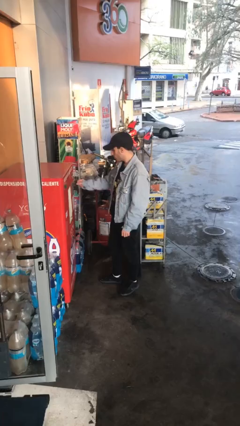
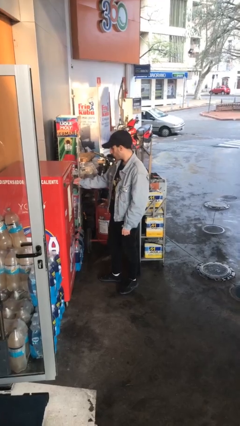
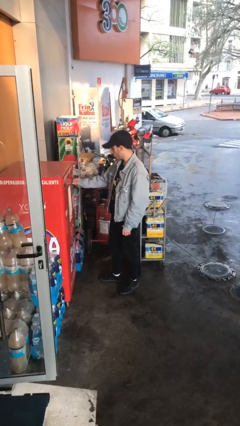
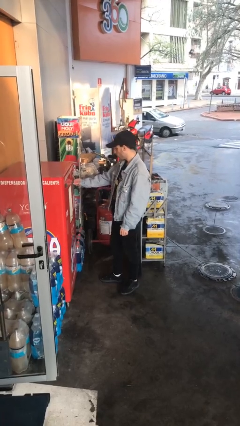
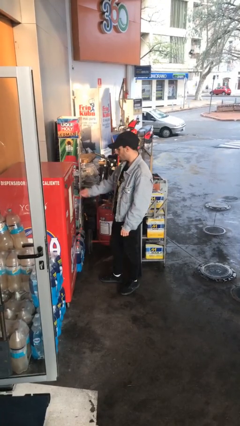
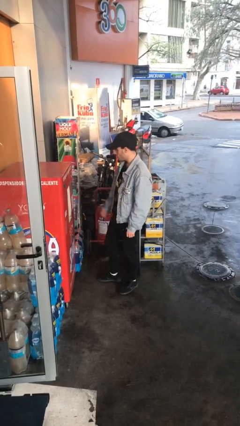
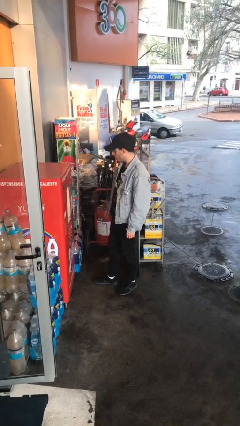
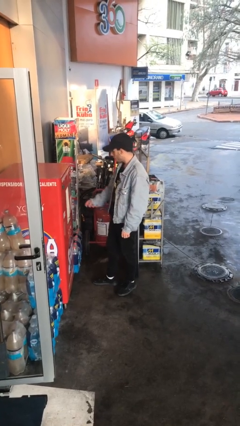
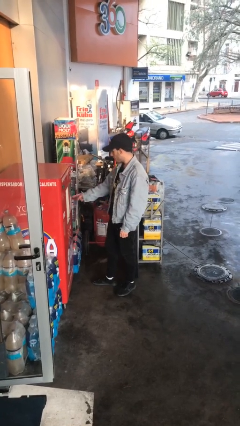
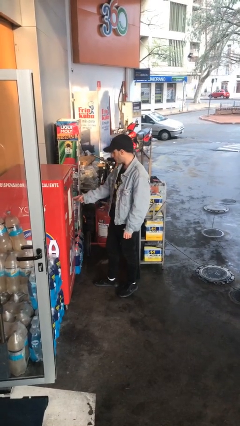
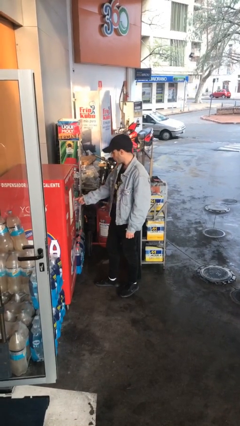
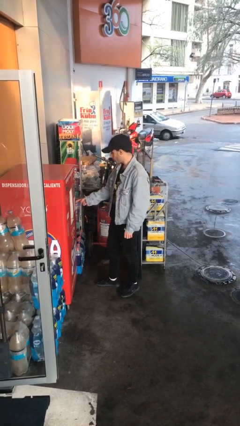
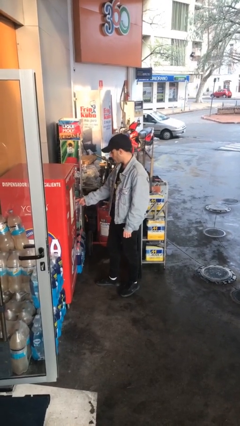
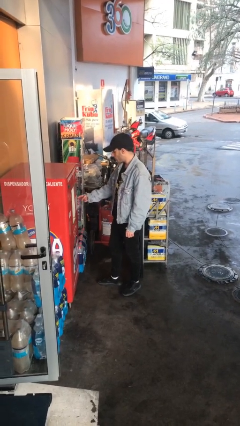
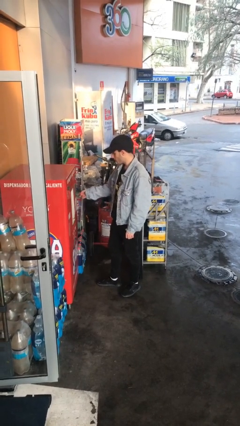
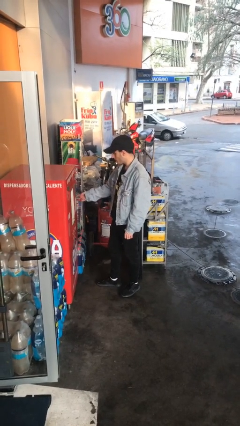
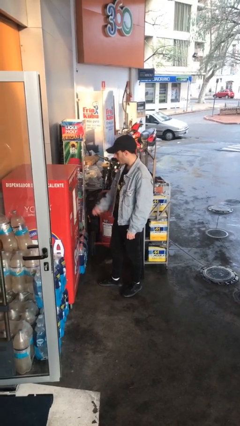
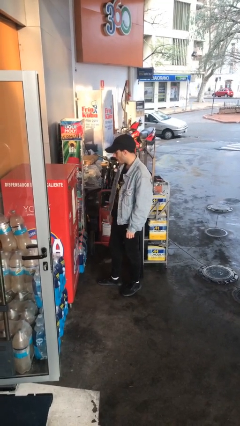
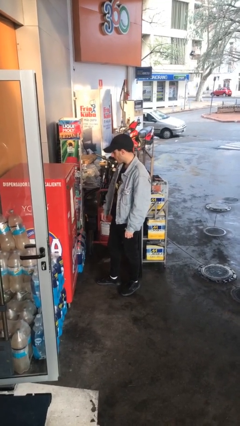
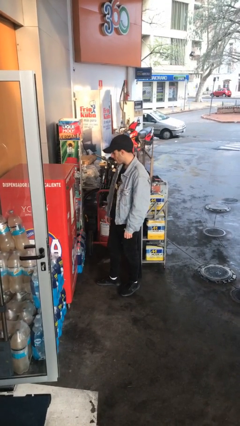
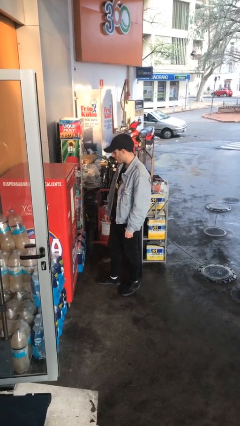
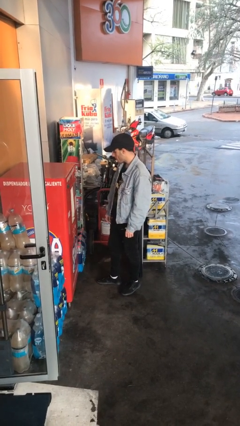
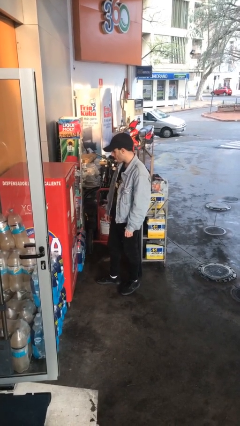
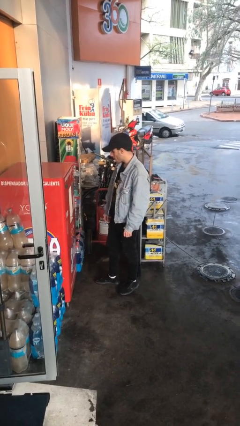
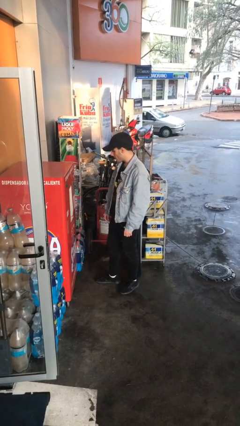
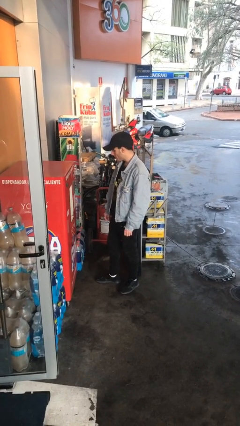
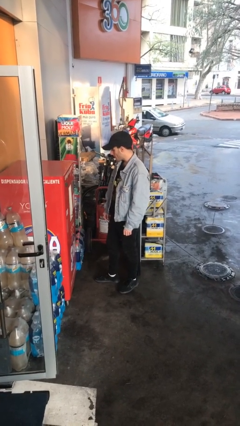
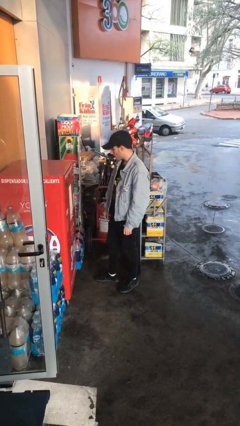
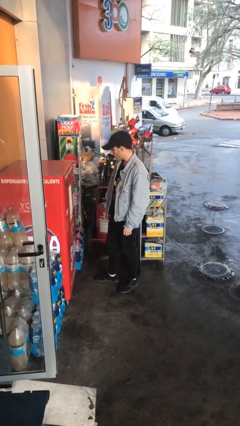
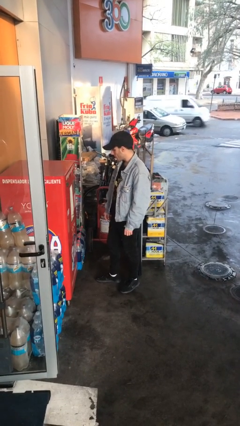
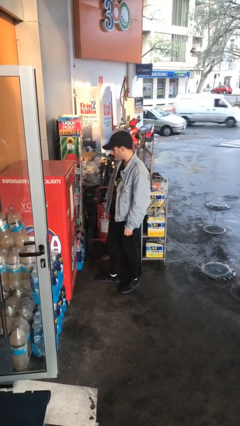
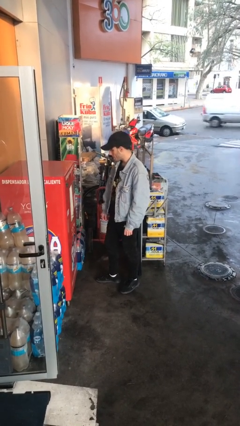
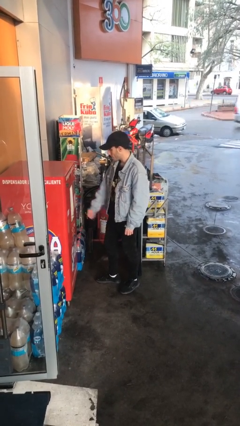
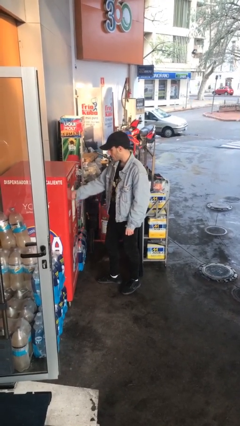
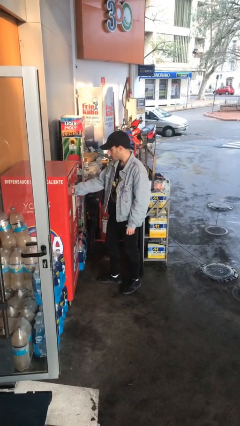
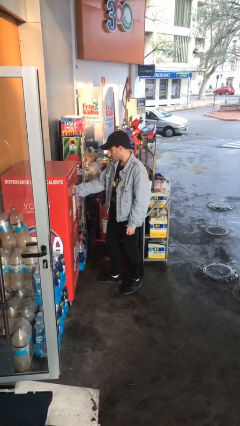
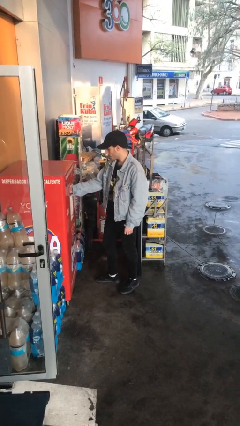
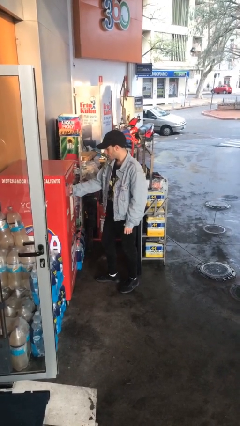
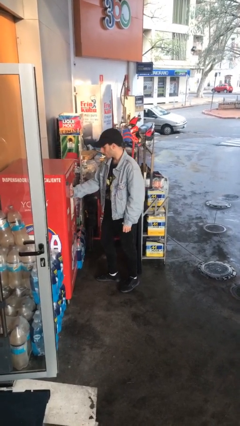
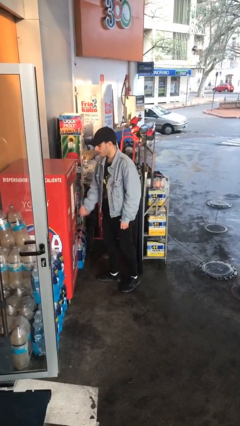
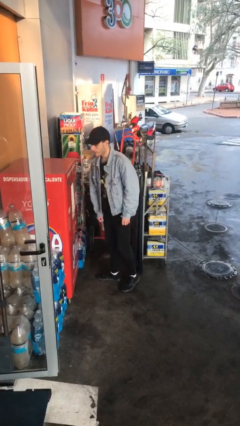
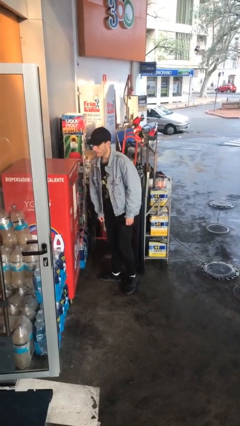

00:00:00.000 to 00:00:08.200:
person purchases from machine

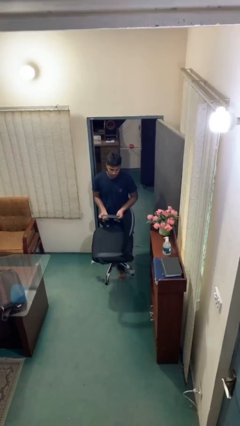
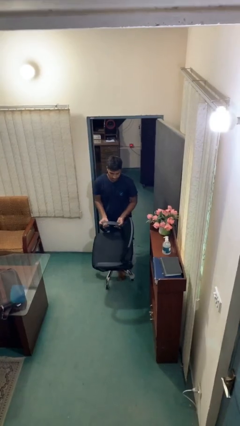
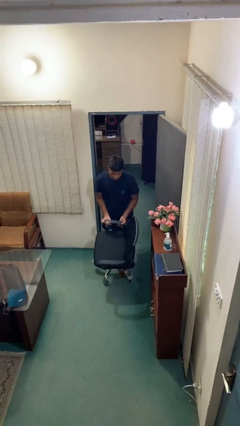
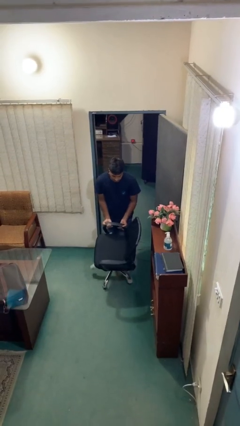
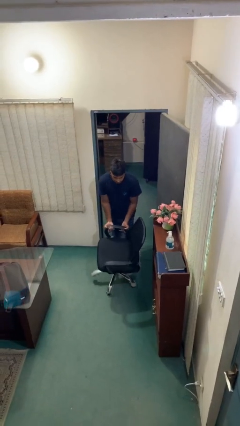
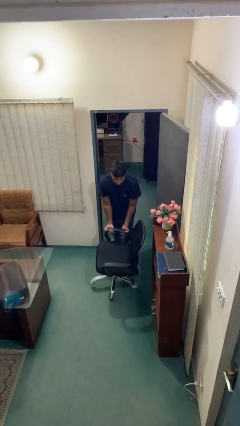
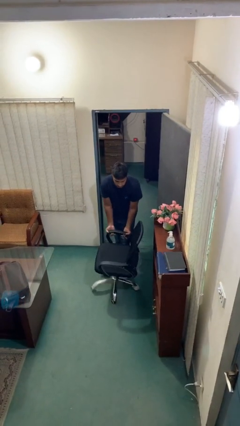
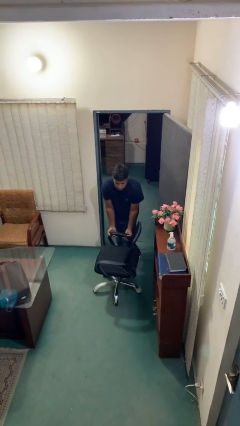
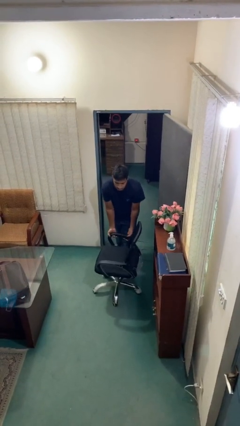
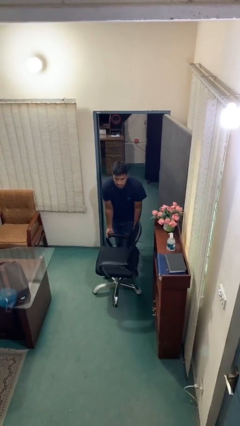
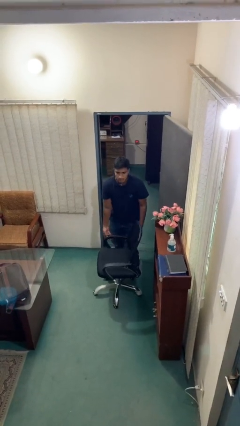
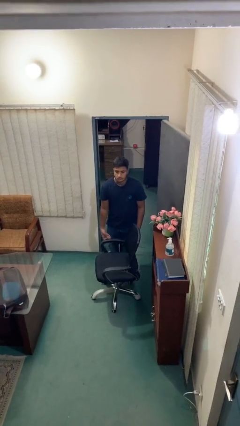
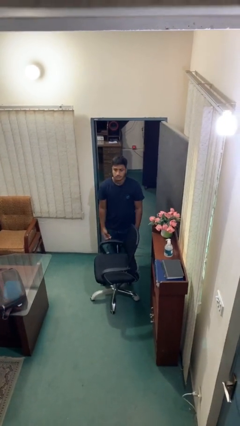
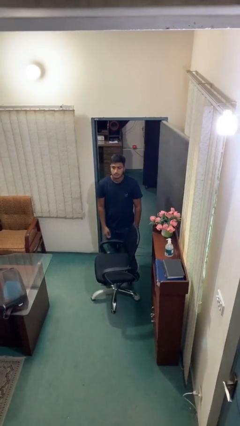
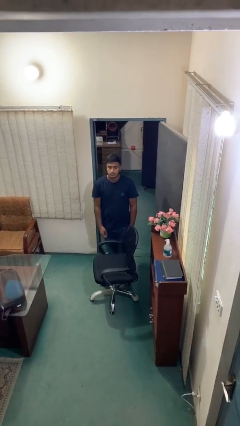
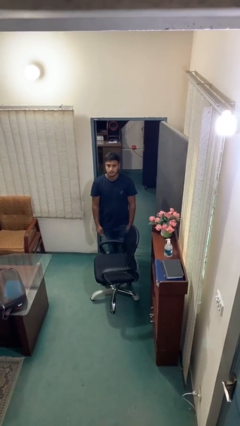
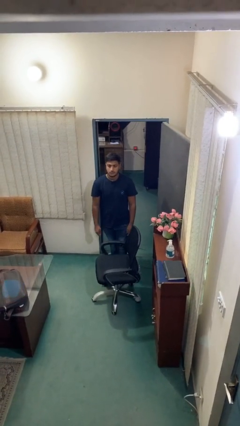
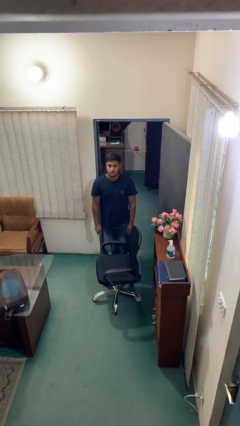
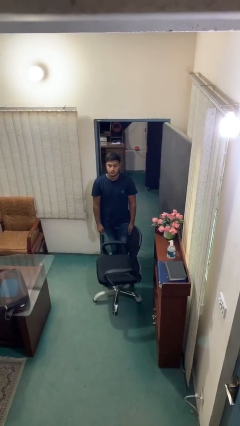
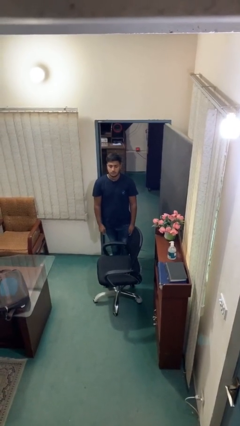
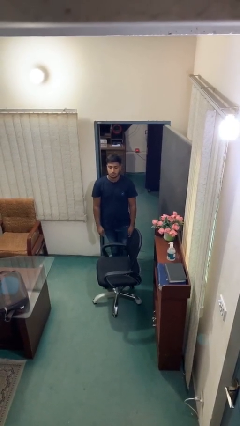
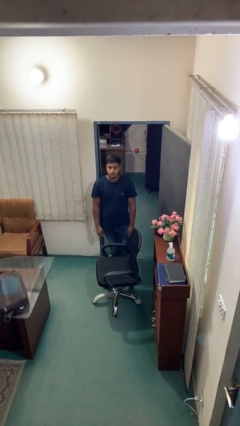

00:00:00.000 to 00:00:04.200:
person puts down object on floor

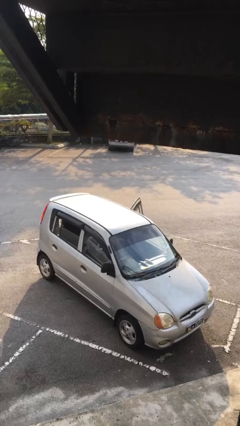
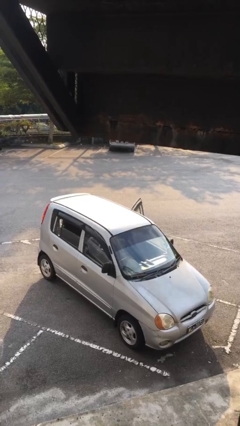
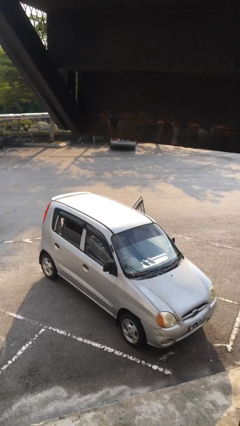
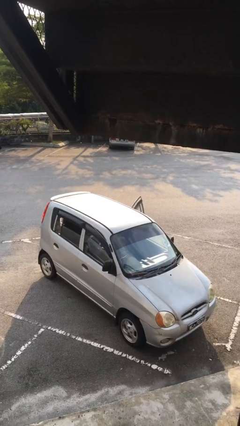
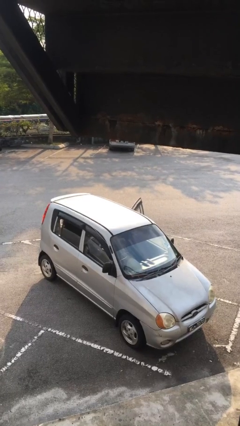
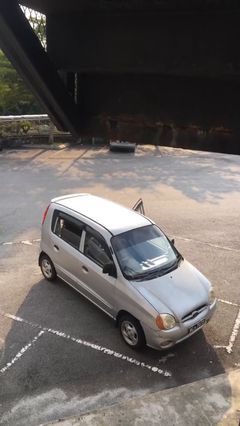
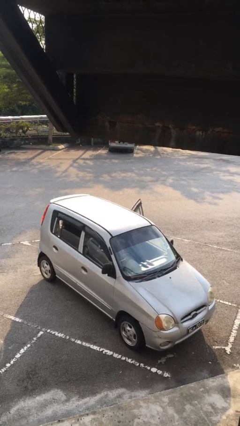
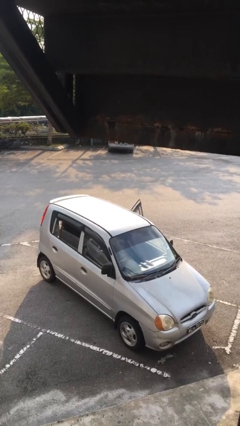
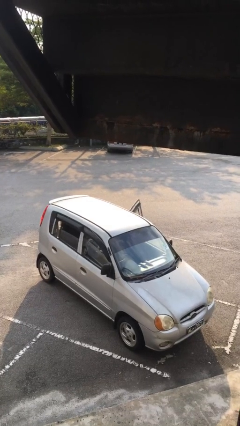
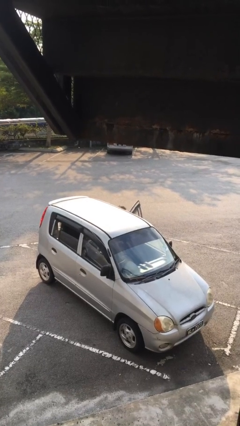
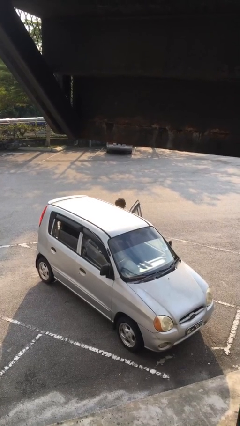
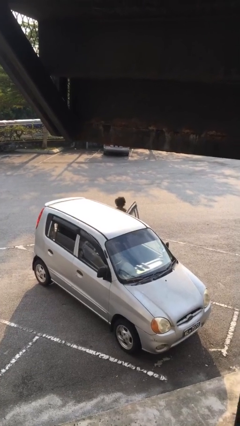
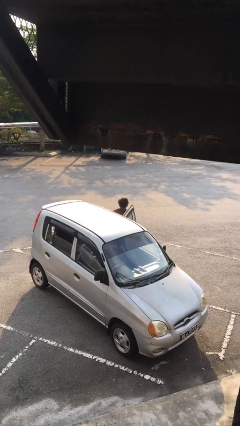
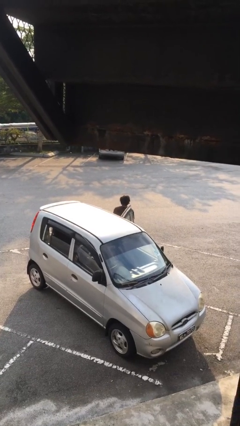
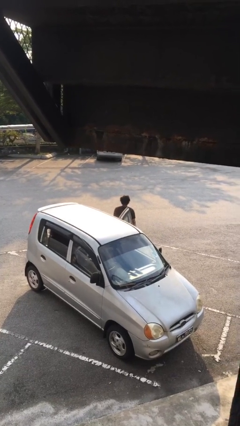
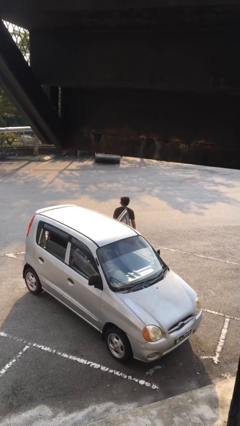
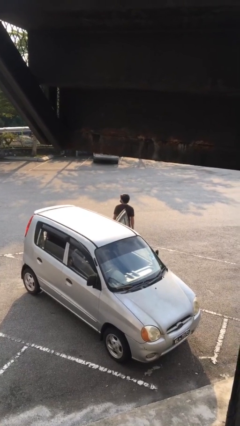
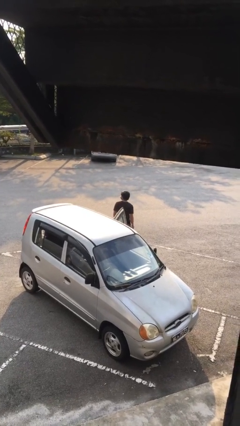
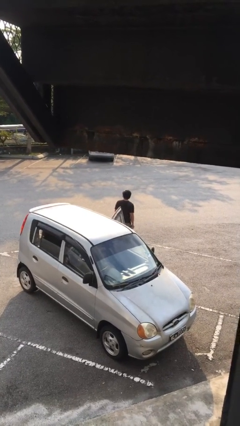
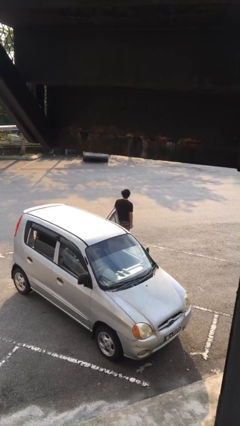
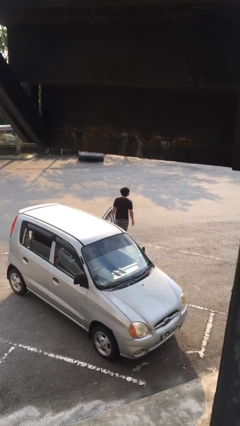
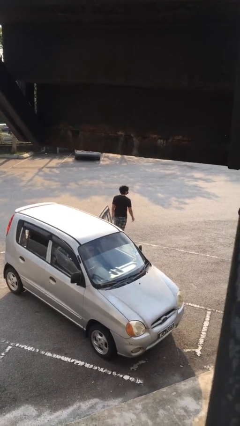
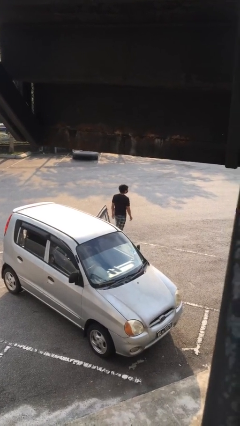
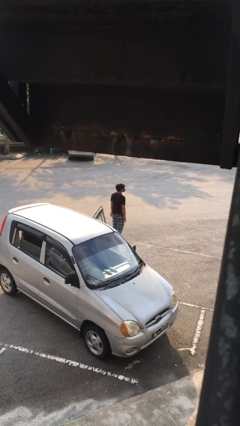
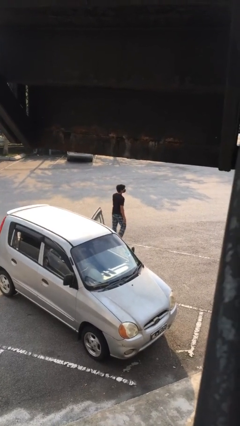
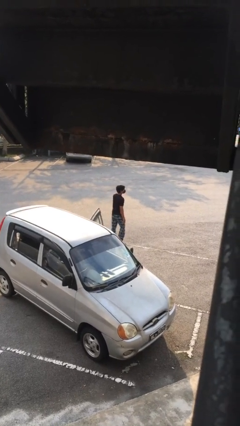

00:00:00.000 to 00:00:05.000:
person exits car

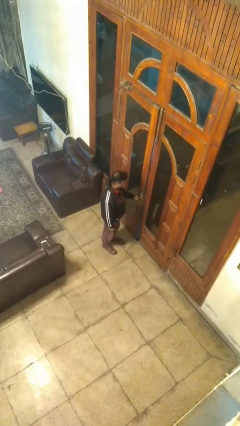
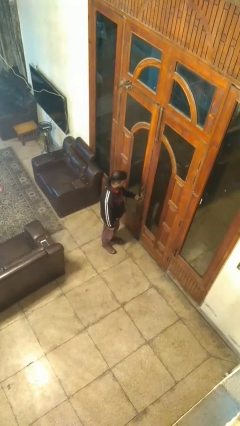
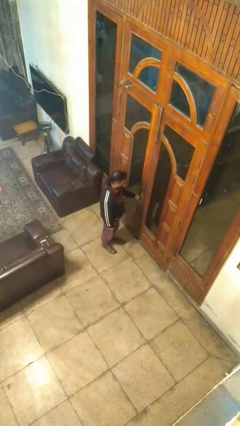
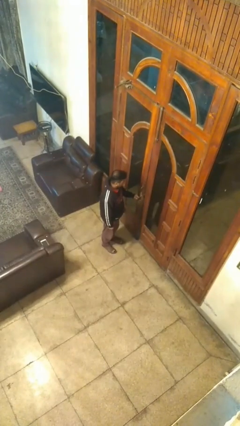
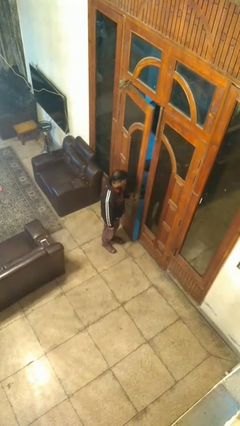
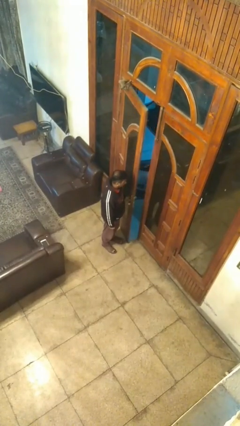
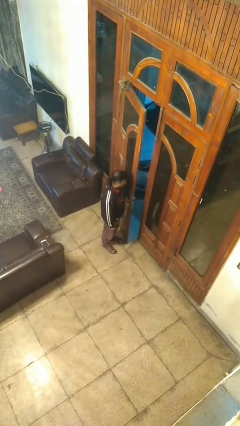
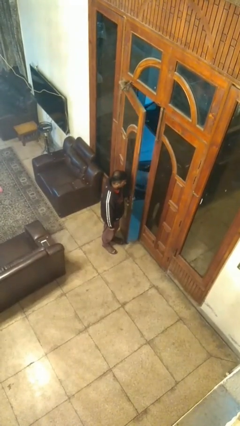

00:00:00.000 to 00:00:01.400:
person opens facility door
